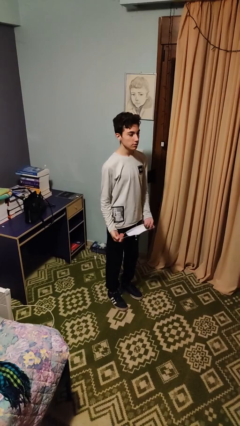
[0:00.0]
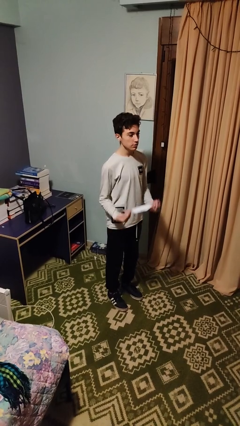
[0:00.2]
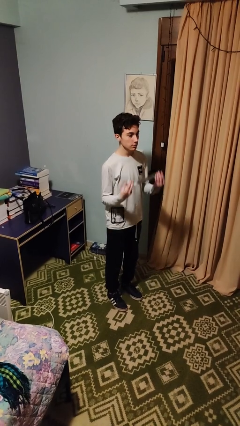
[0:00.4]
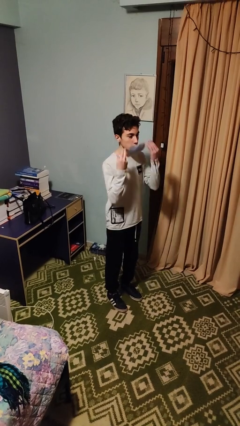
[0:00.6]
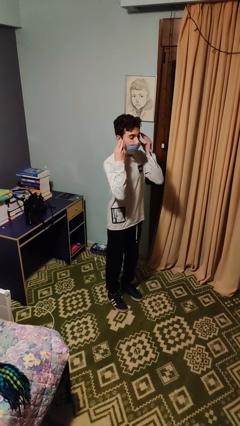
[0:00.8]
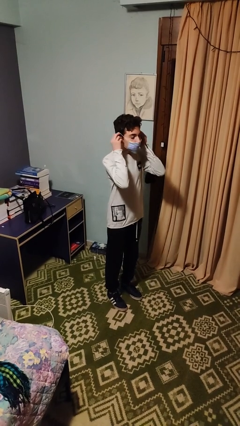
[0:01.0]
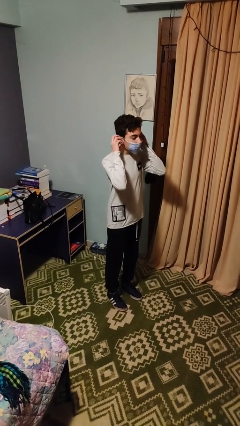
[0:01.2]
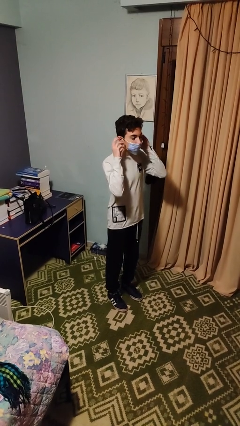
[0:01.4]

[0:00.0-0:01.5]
person puts on facemask

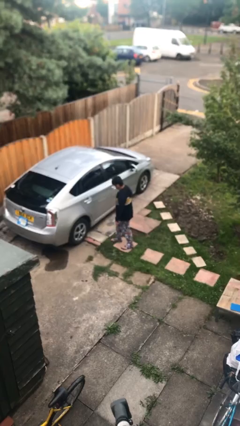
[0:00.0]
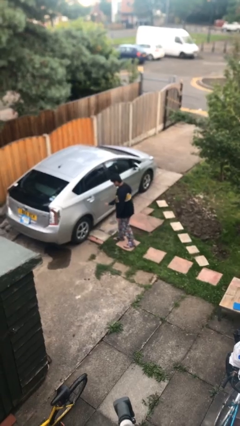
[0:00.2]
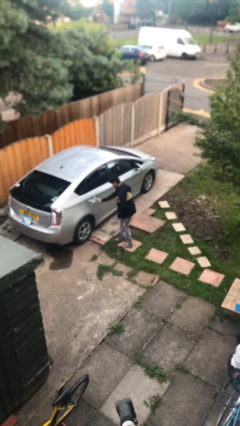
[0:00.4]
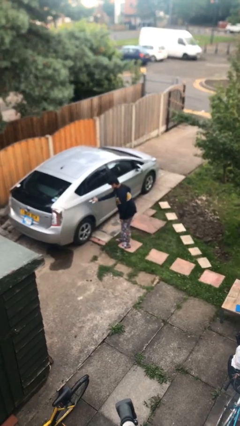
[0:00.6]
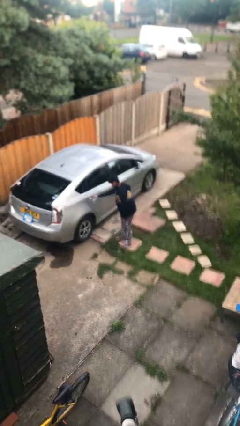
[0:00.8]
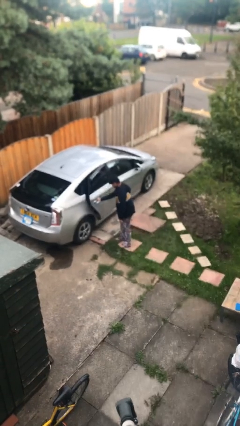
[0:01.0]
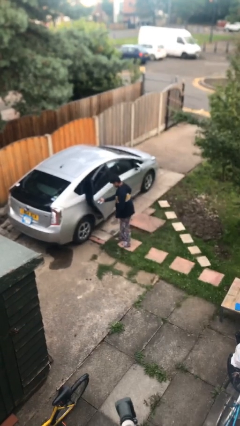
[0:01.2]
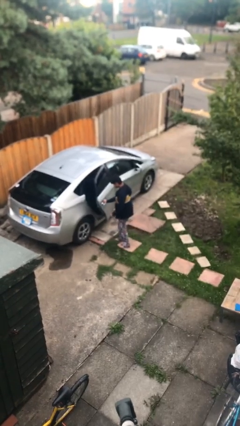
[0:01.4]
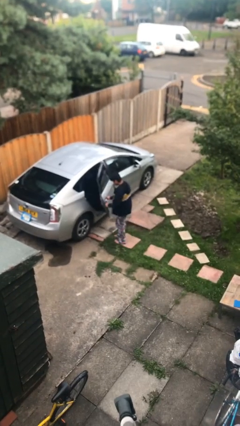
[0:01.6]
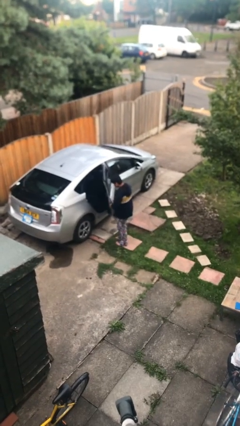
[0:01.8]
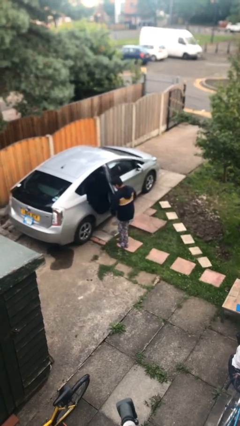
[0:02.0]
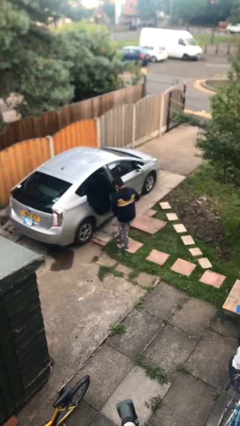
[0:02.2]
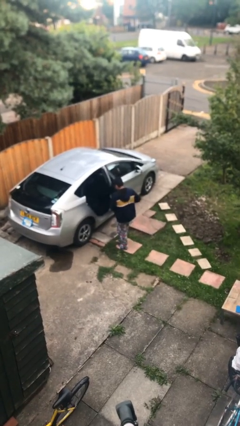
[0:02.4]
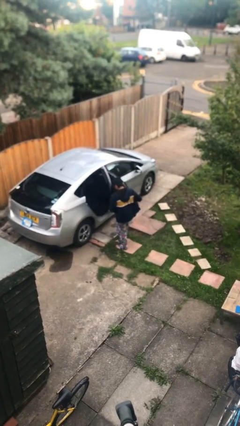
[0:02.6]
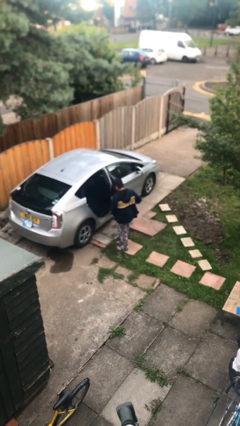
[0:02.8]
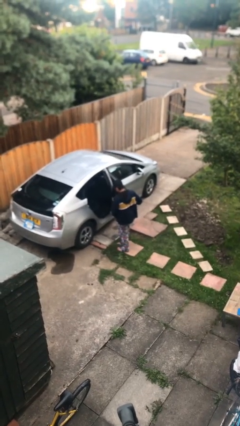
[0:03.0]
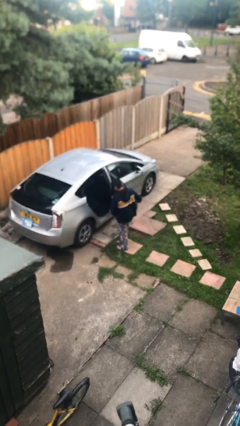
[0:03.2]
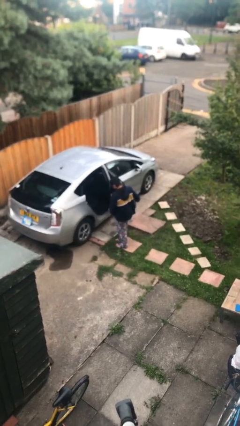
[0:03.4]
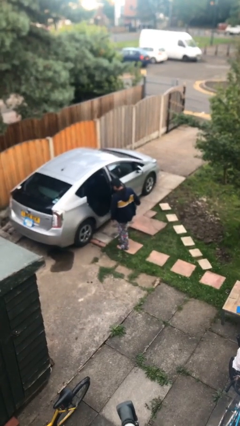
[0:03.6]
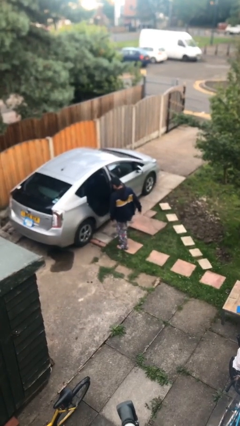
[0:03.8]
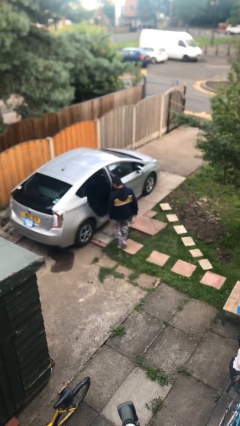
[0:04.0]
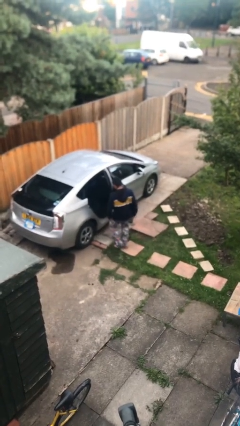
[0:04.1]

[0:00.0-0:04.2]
person opens car door

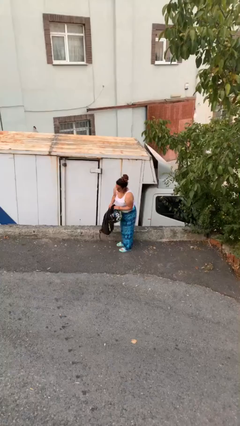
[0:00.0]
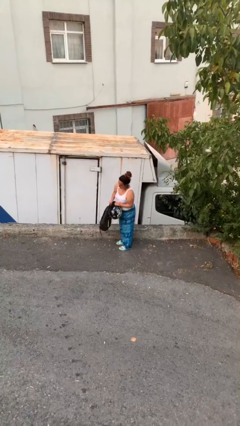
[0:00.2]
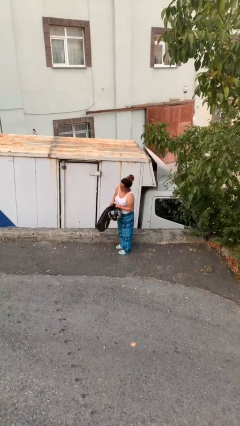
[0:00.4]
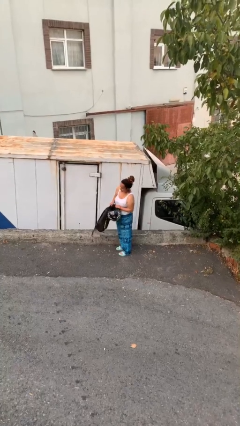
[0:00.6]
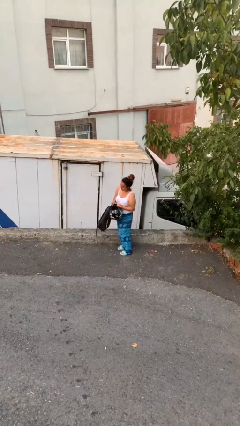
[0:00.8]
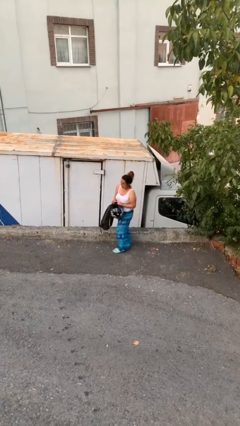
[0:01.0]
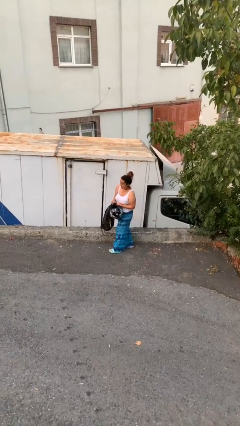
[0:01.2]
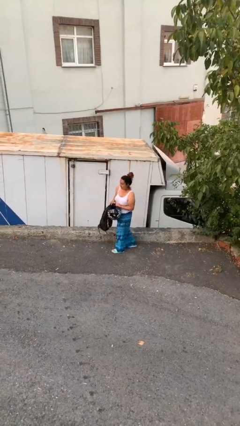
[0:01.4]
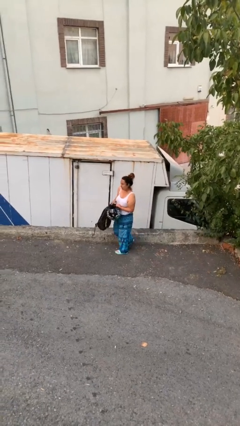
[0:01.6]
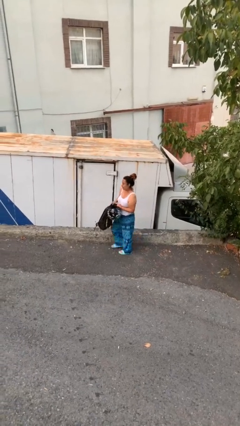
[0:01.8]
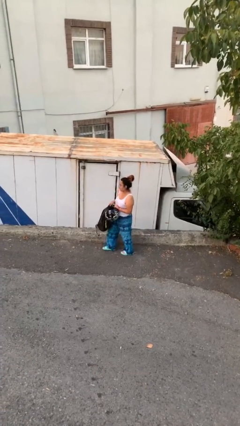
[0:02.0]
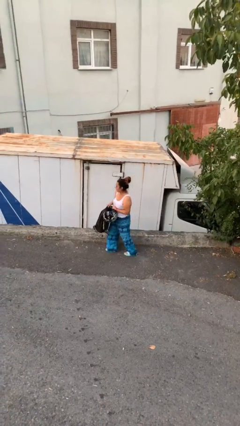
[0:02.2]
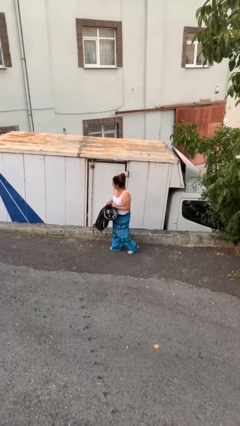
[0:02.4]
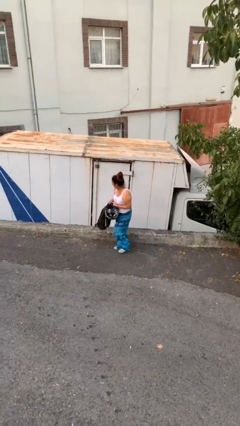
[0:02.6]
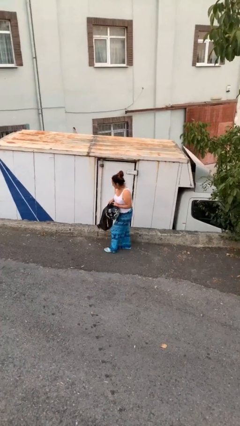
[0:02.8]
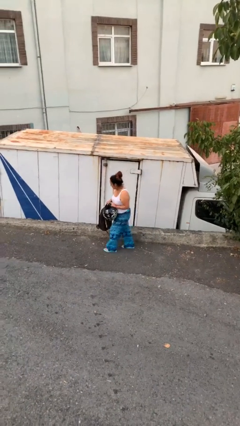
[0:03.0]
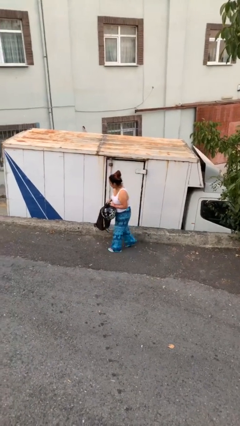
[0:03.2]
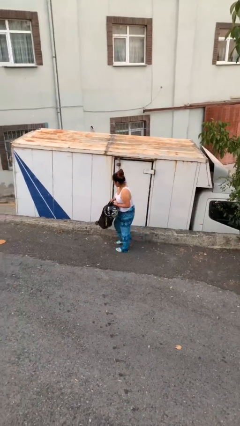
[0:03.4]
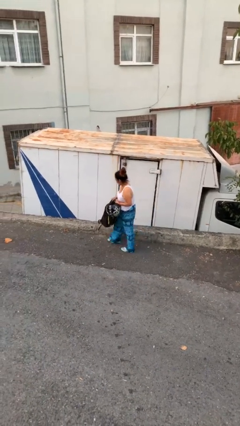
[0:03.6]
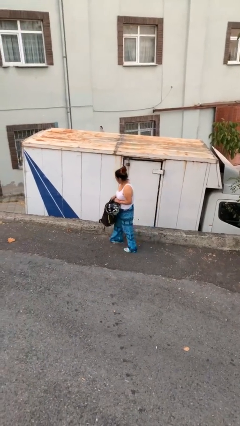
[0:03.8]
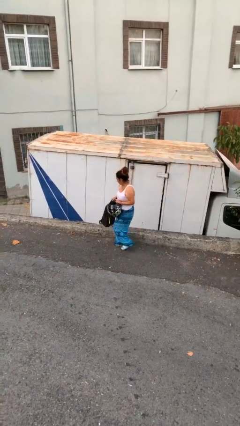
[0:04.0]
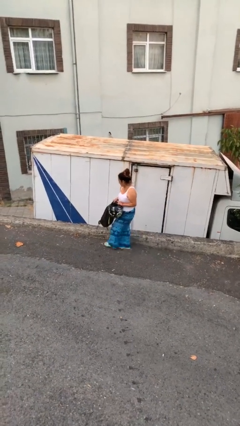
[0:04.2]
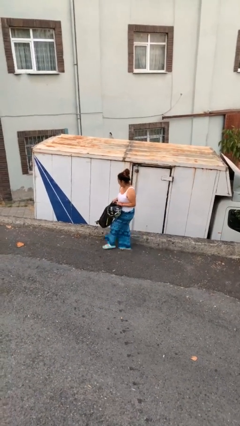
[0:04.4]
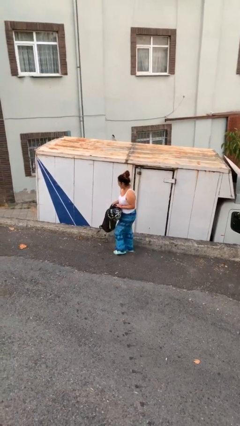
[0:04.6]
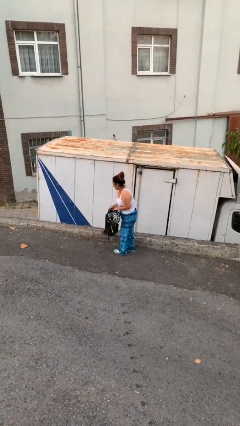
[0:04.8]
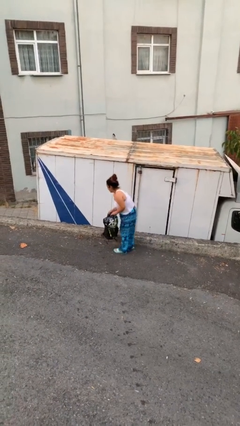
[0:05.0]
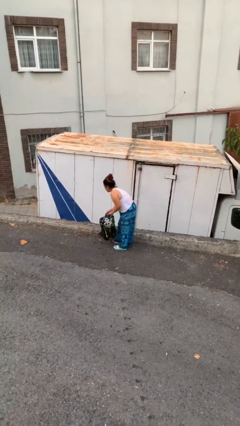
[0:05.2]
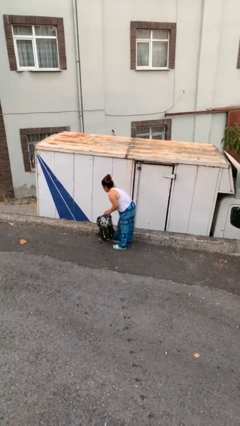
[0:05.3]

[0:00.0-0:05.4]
person carries heavy object

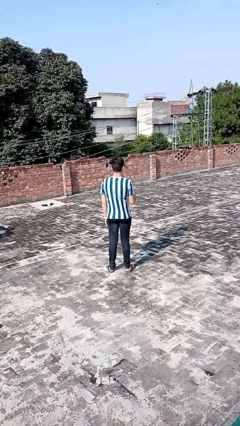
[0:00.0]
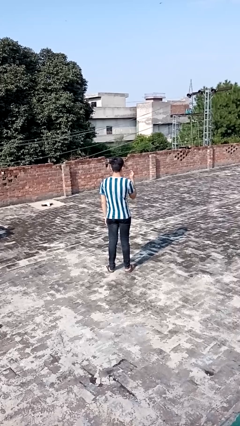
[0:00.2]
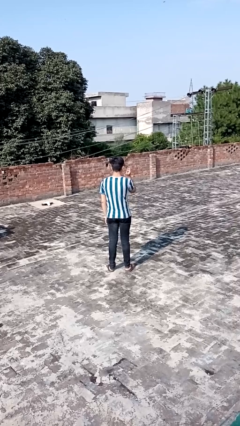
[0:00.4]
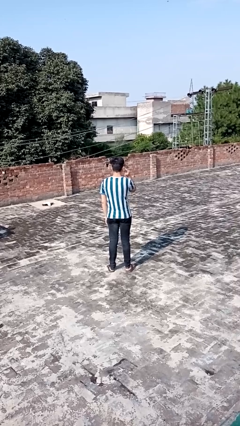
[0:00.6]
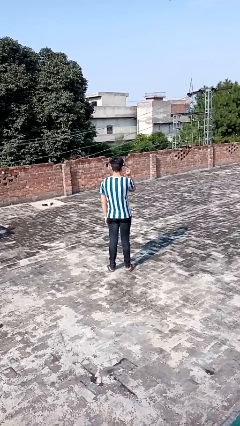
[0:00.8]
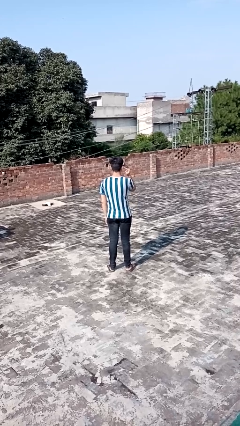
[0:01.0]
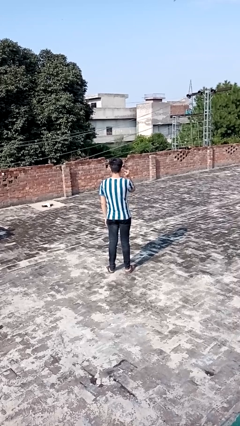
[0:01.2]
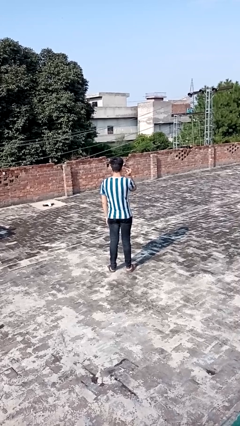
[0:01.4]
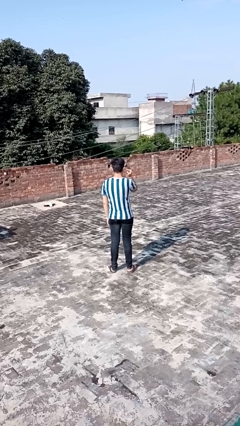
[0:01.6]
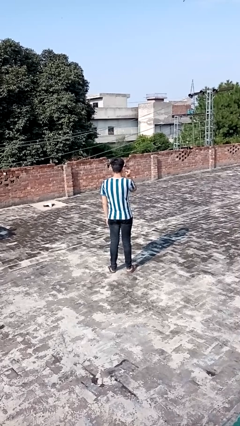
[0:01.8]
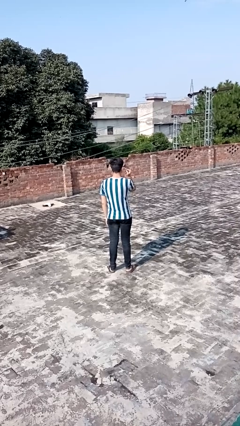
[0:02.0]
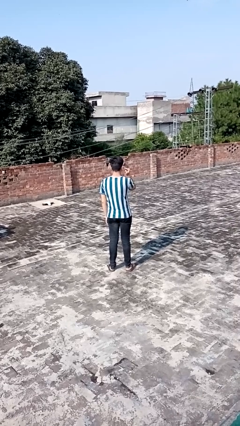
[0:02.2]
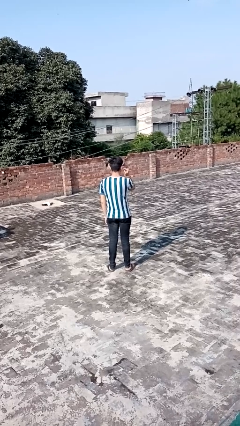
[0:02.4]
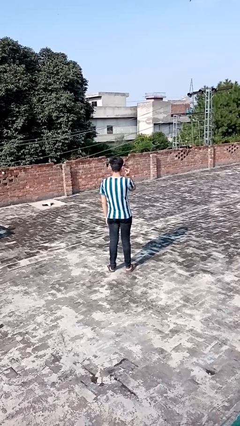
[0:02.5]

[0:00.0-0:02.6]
person gestures listen closely

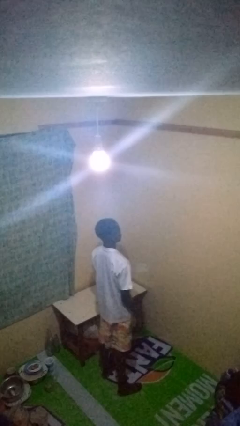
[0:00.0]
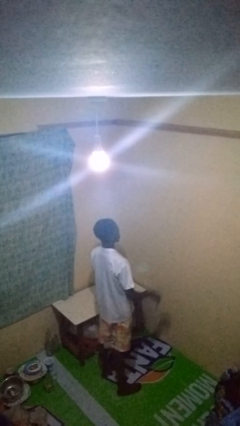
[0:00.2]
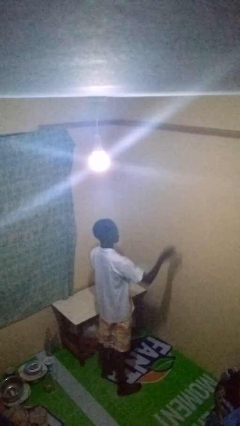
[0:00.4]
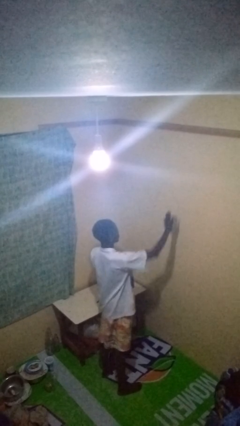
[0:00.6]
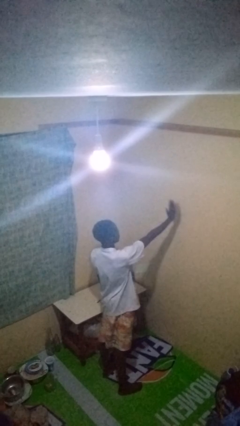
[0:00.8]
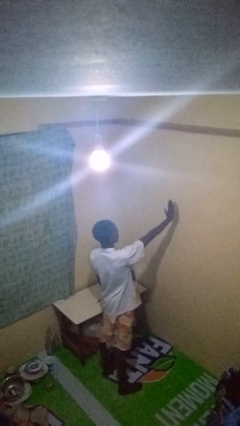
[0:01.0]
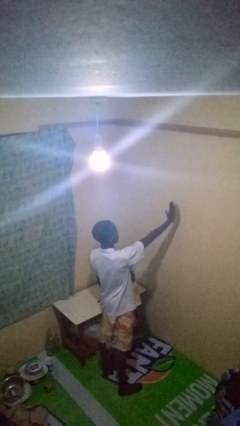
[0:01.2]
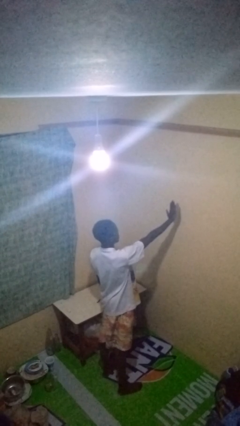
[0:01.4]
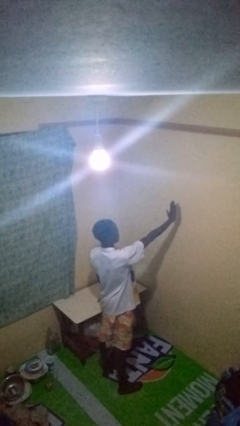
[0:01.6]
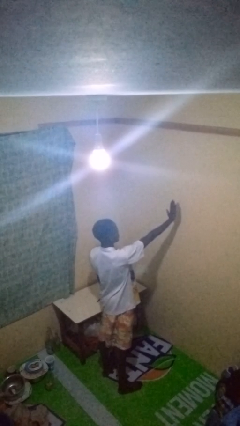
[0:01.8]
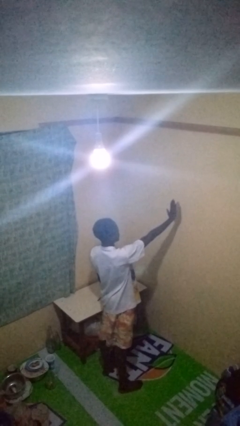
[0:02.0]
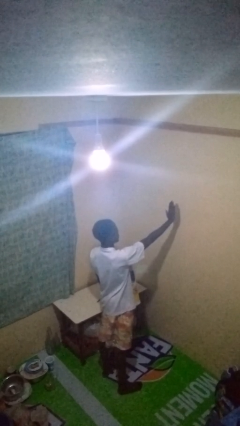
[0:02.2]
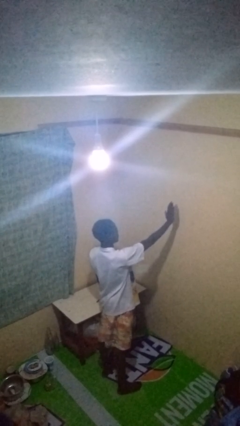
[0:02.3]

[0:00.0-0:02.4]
person gestures stop

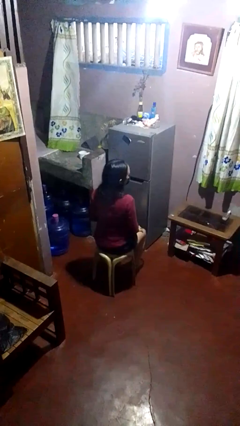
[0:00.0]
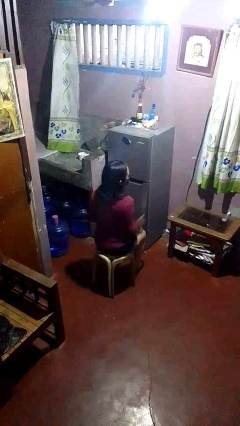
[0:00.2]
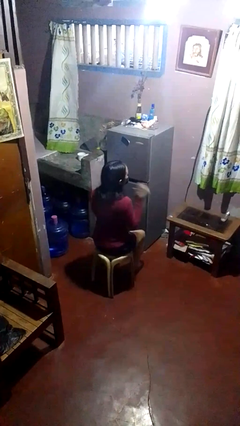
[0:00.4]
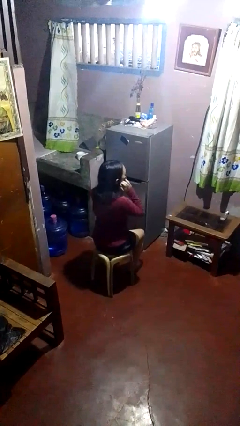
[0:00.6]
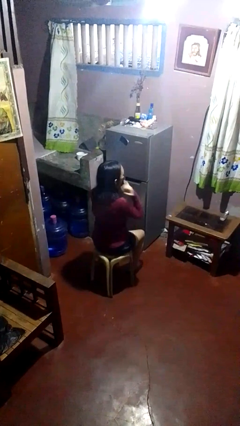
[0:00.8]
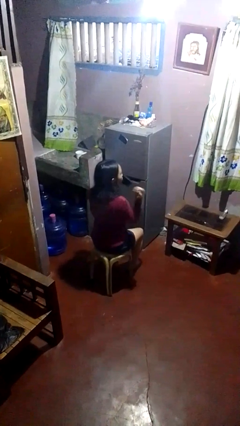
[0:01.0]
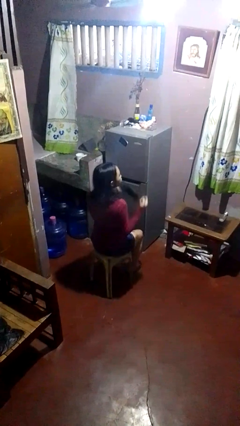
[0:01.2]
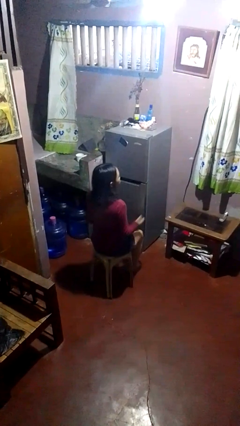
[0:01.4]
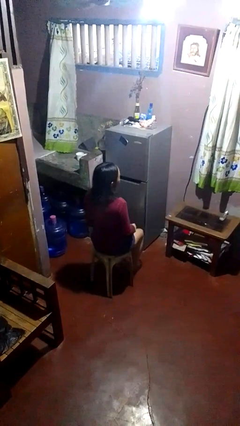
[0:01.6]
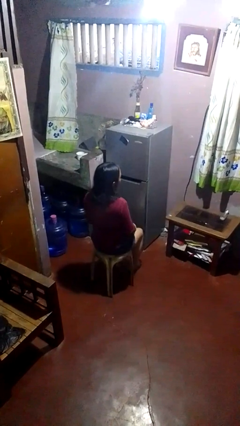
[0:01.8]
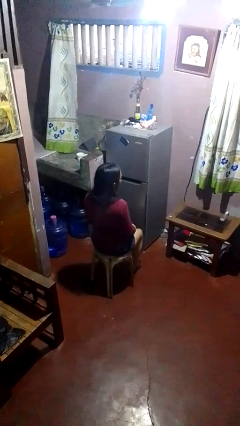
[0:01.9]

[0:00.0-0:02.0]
person takes off facemask
